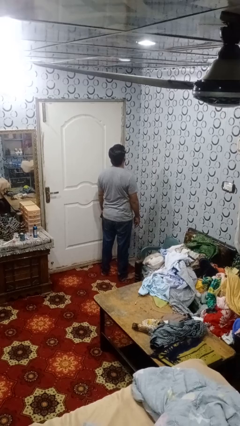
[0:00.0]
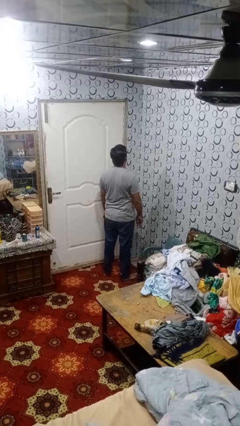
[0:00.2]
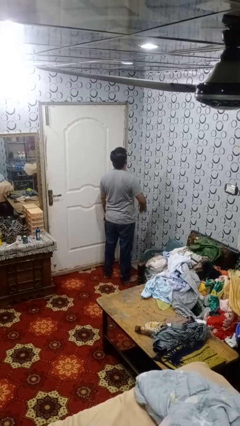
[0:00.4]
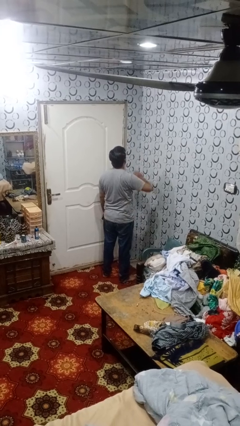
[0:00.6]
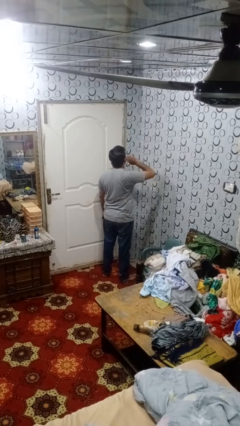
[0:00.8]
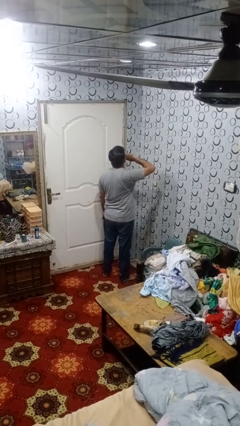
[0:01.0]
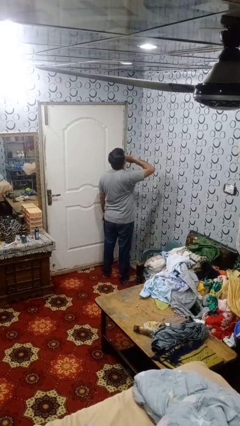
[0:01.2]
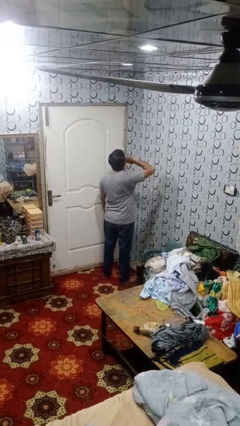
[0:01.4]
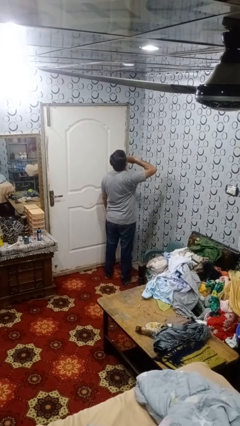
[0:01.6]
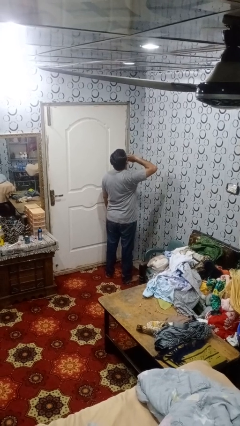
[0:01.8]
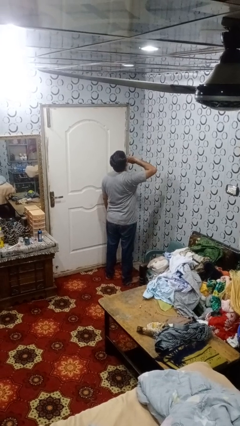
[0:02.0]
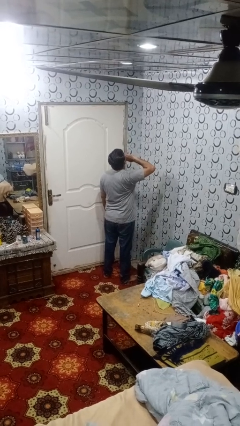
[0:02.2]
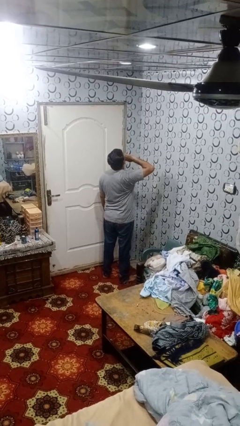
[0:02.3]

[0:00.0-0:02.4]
person yawns

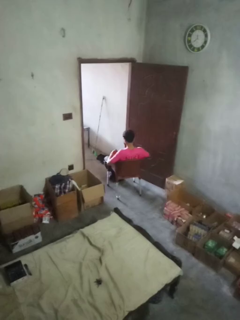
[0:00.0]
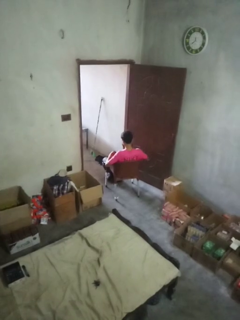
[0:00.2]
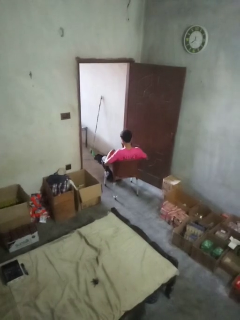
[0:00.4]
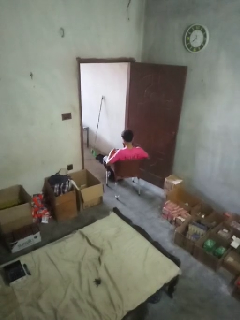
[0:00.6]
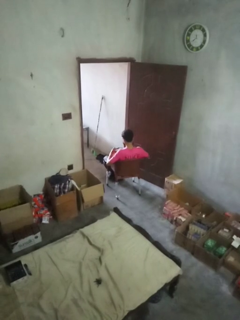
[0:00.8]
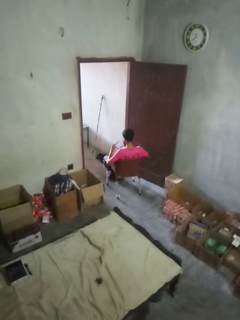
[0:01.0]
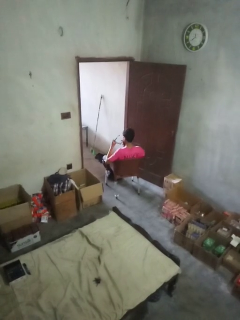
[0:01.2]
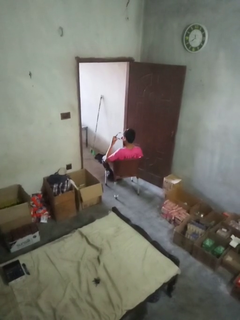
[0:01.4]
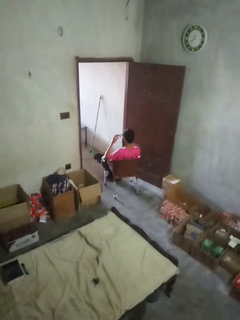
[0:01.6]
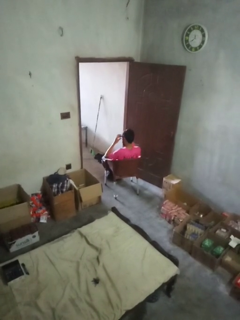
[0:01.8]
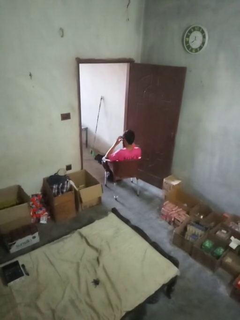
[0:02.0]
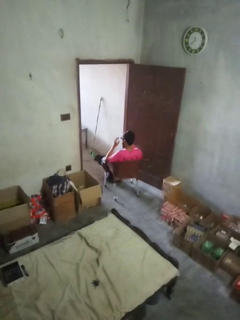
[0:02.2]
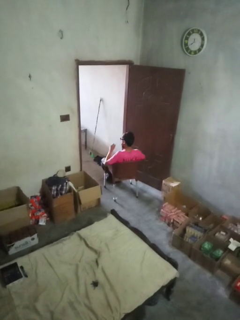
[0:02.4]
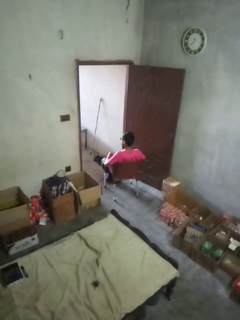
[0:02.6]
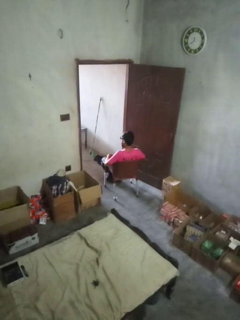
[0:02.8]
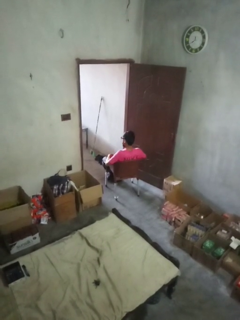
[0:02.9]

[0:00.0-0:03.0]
person puts on glasses

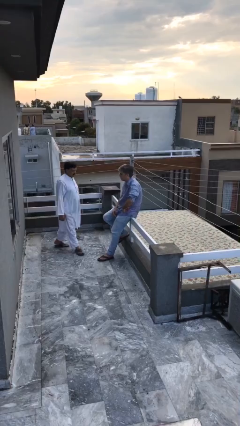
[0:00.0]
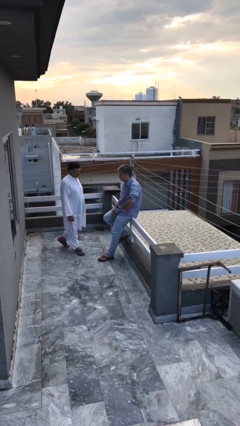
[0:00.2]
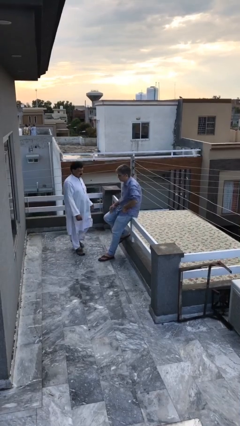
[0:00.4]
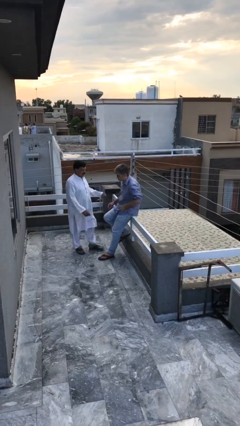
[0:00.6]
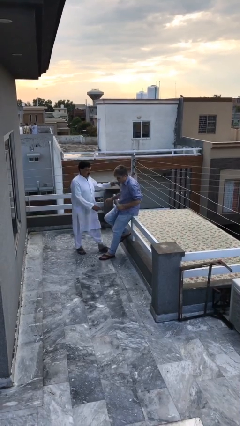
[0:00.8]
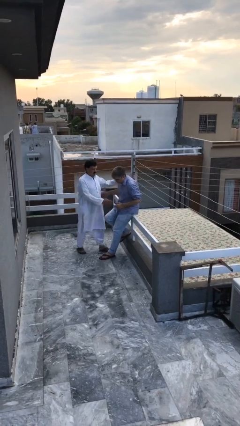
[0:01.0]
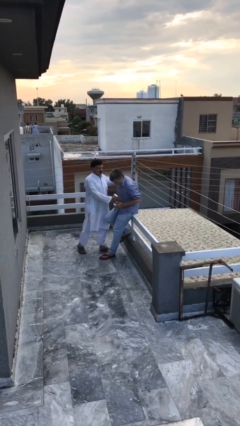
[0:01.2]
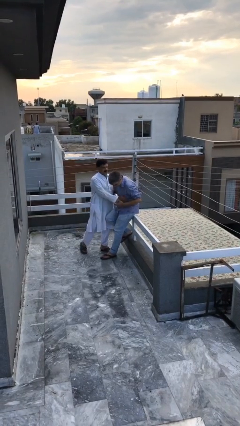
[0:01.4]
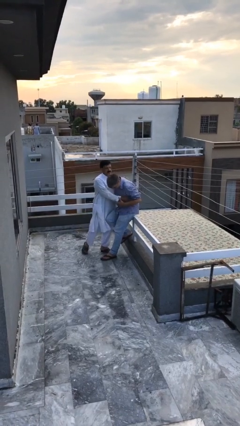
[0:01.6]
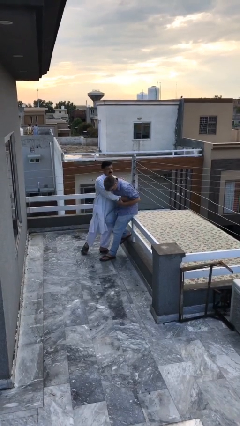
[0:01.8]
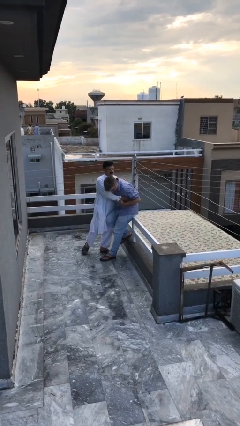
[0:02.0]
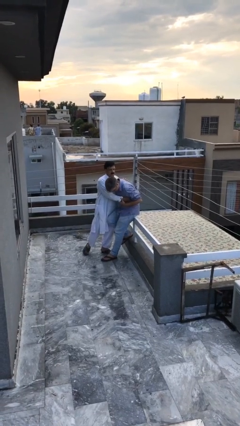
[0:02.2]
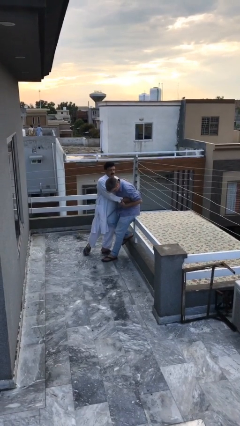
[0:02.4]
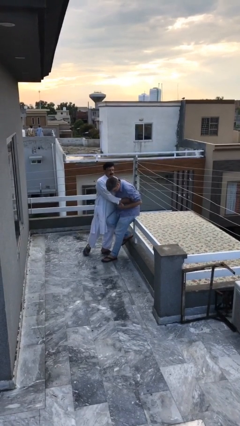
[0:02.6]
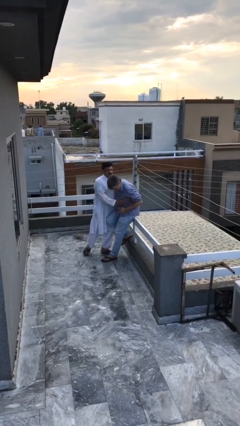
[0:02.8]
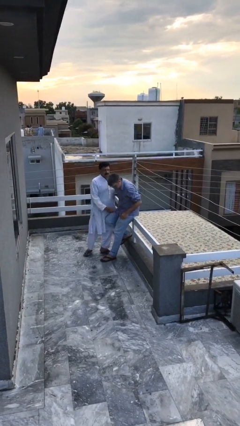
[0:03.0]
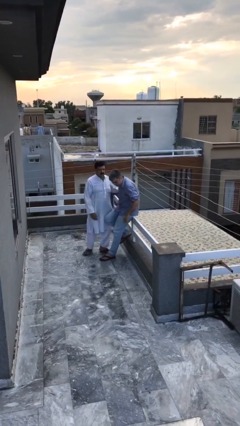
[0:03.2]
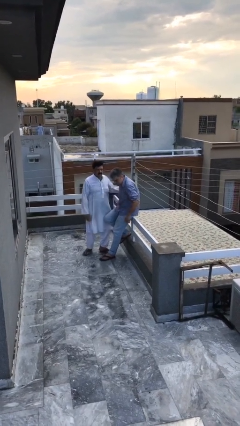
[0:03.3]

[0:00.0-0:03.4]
person embraces person

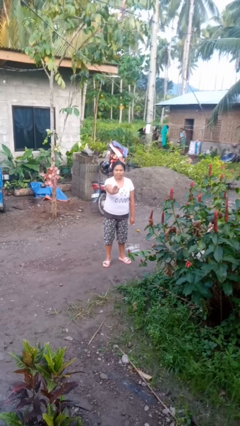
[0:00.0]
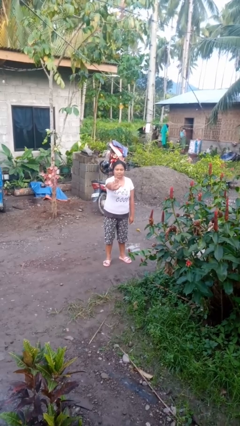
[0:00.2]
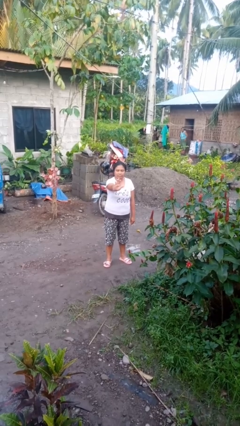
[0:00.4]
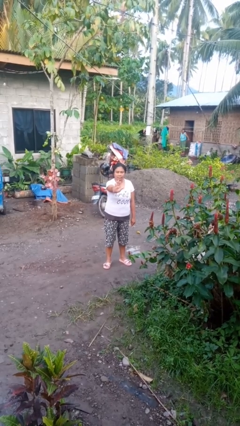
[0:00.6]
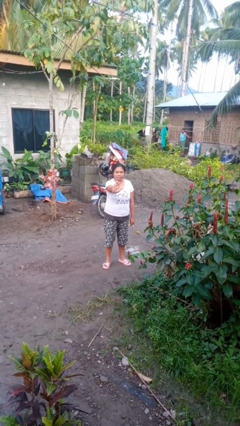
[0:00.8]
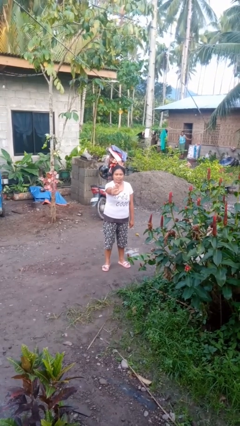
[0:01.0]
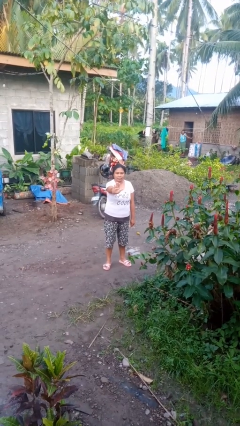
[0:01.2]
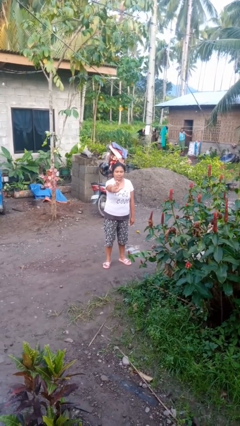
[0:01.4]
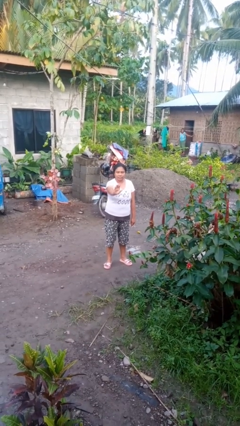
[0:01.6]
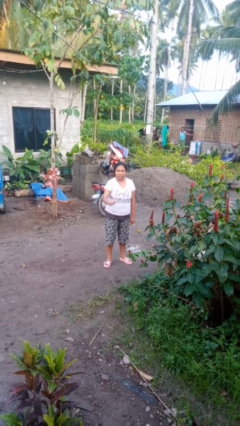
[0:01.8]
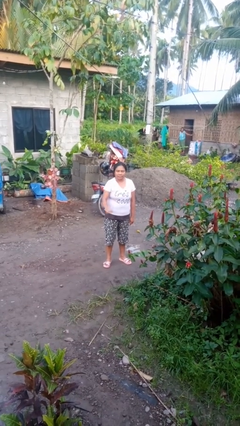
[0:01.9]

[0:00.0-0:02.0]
person gestures stop

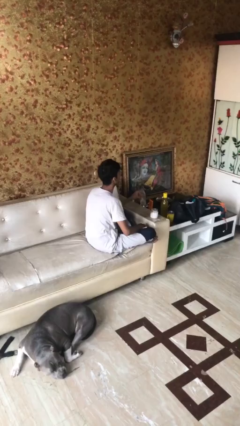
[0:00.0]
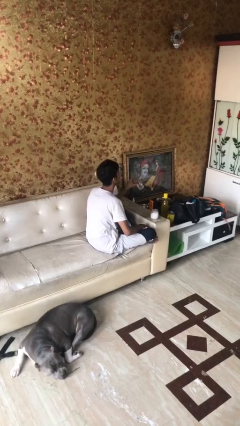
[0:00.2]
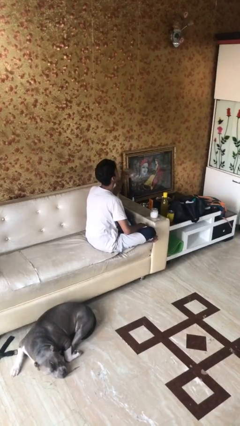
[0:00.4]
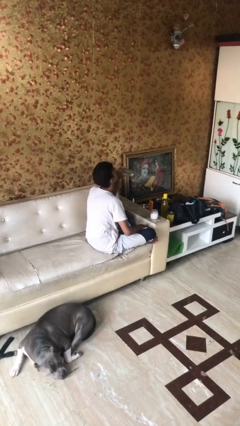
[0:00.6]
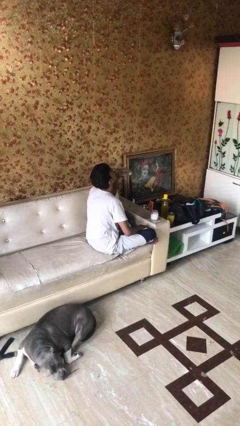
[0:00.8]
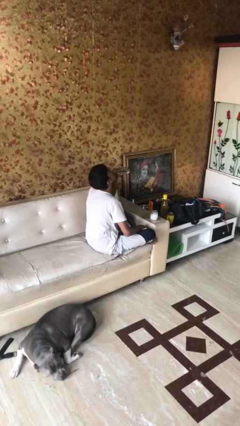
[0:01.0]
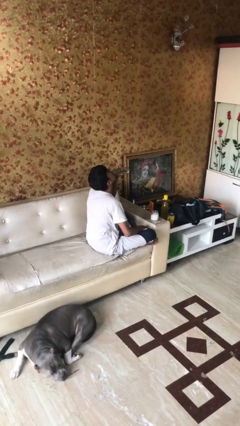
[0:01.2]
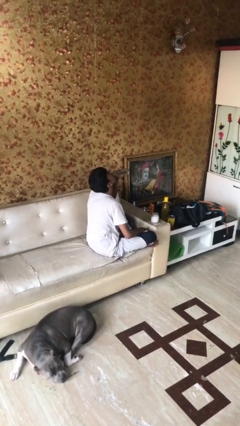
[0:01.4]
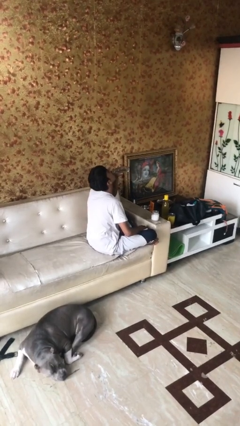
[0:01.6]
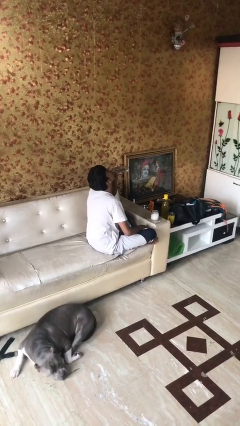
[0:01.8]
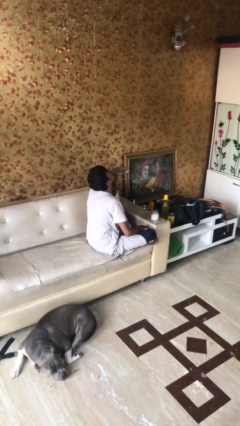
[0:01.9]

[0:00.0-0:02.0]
person drinks from cup

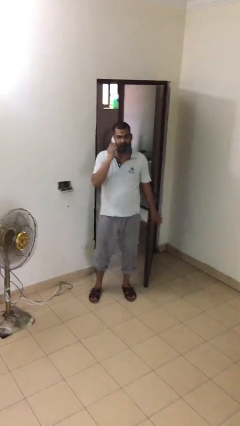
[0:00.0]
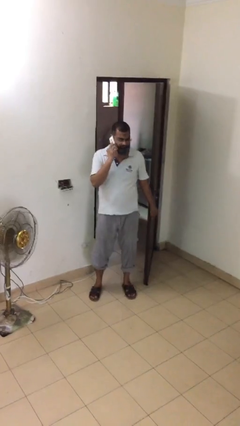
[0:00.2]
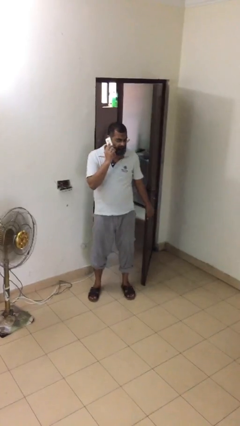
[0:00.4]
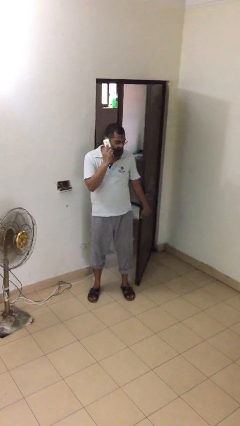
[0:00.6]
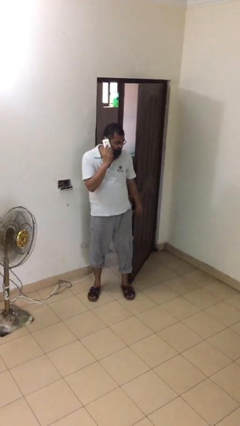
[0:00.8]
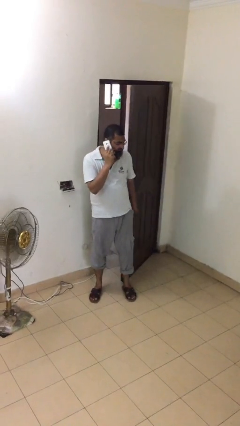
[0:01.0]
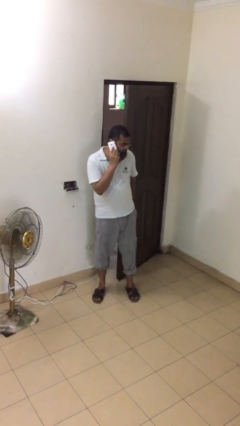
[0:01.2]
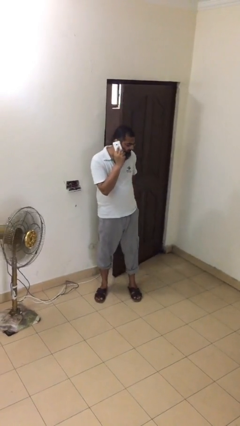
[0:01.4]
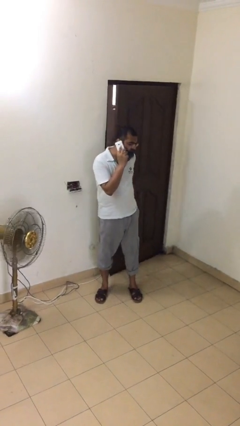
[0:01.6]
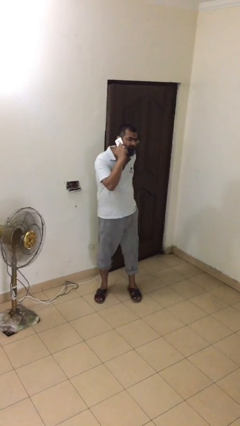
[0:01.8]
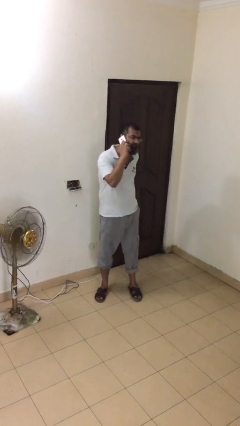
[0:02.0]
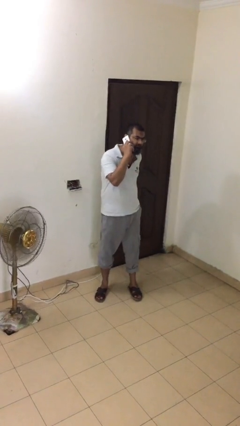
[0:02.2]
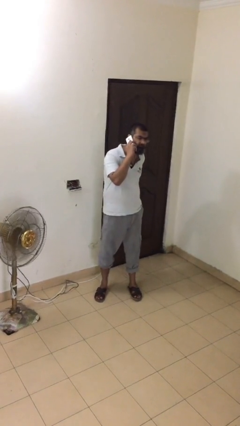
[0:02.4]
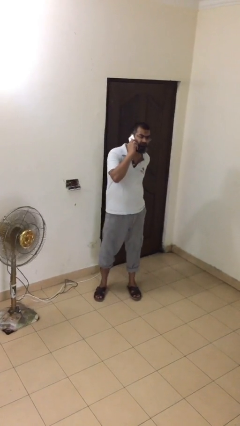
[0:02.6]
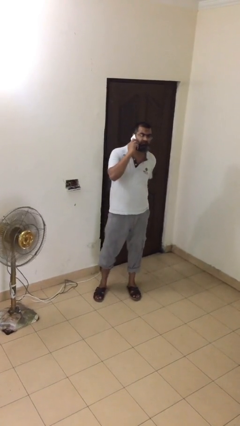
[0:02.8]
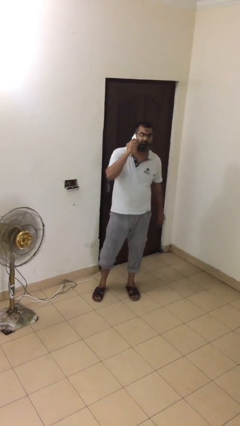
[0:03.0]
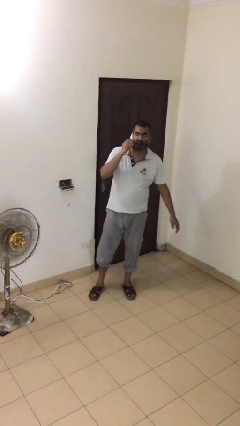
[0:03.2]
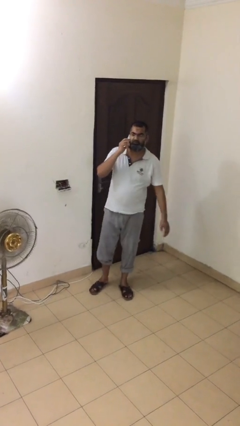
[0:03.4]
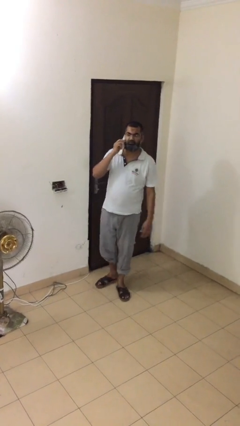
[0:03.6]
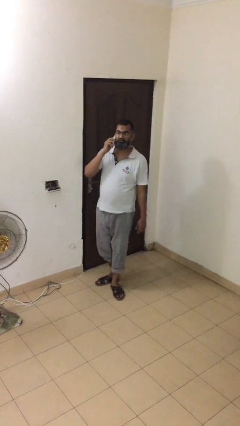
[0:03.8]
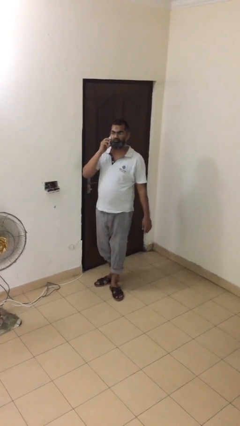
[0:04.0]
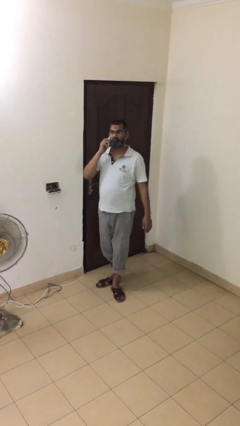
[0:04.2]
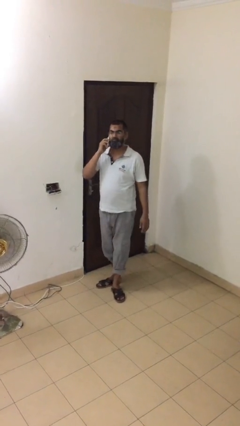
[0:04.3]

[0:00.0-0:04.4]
person closes facility door

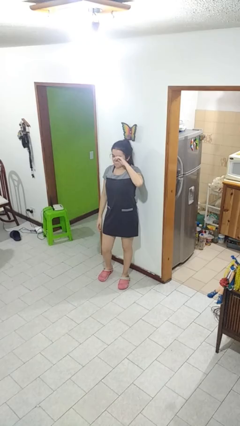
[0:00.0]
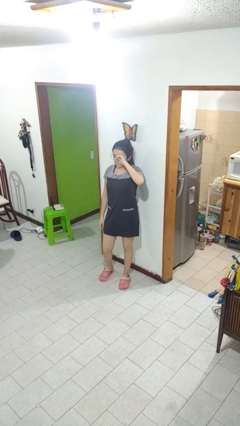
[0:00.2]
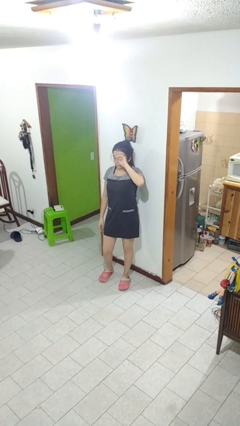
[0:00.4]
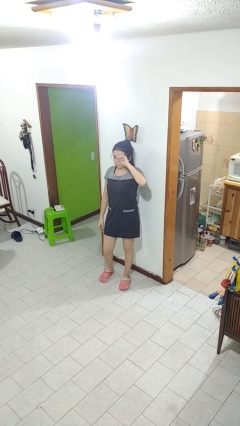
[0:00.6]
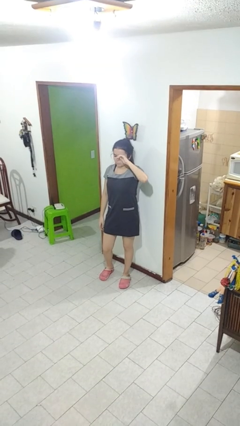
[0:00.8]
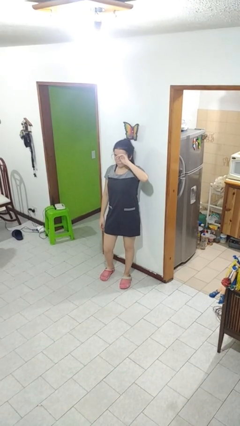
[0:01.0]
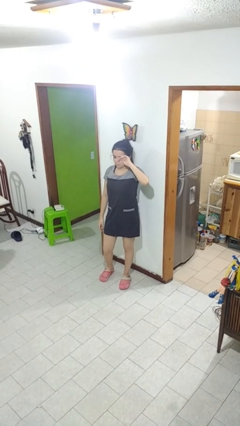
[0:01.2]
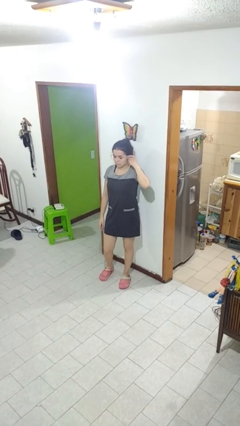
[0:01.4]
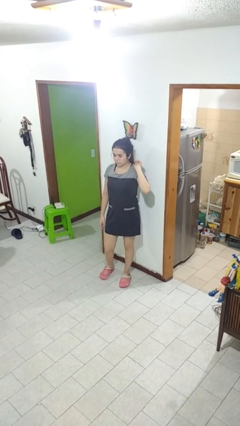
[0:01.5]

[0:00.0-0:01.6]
person rubs eyes
